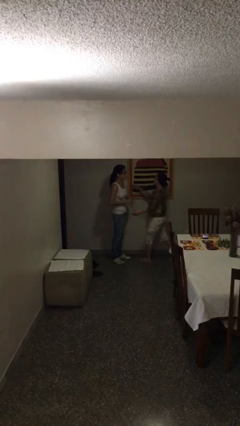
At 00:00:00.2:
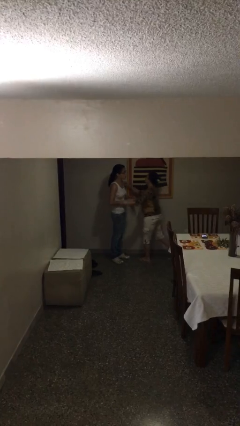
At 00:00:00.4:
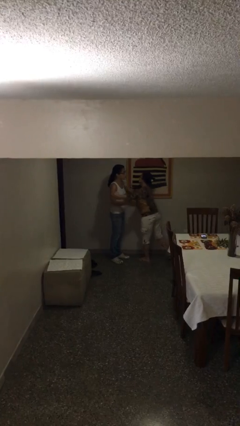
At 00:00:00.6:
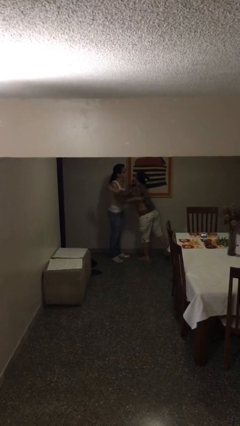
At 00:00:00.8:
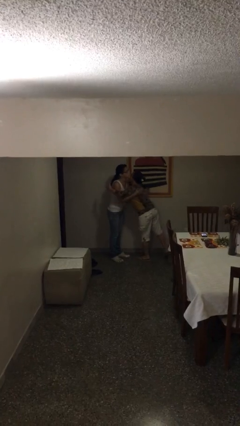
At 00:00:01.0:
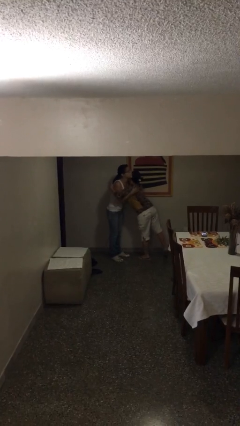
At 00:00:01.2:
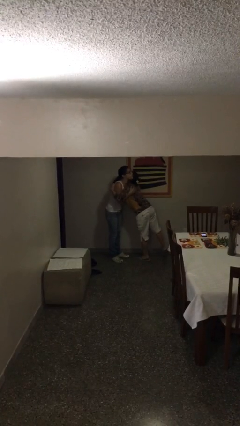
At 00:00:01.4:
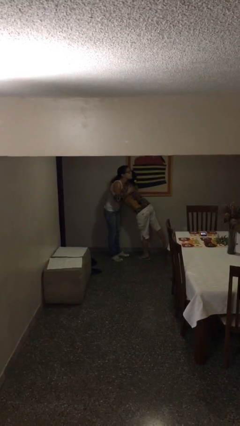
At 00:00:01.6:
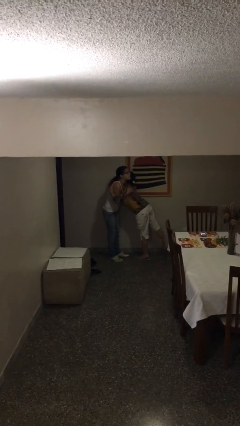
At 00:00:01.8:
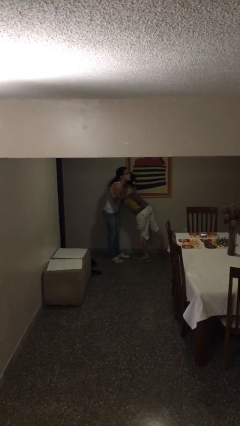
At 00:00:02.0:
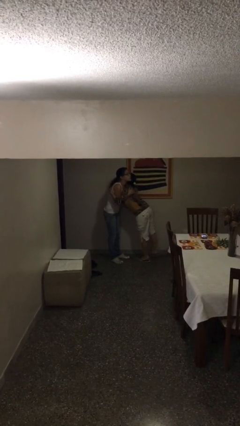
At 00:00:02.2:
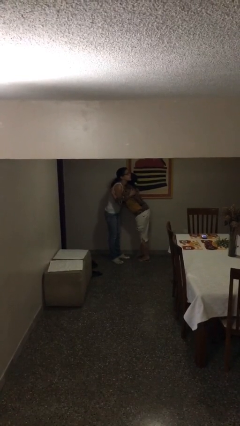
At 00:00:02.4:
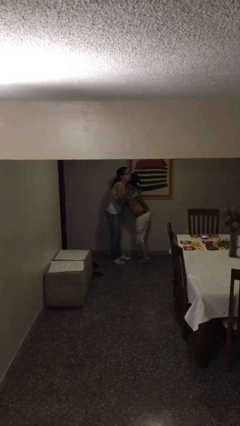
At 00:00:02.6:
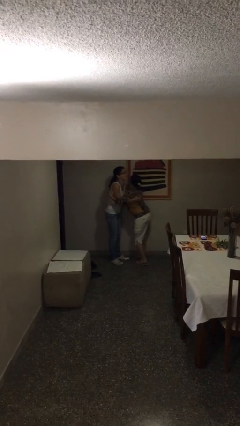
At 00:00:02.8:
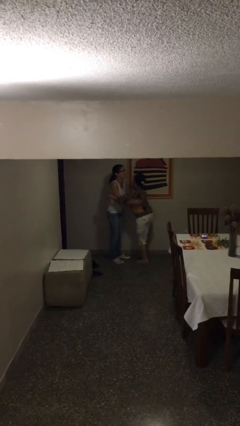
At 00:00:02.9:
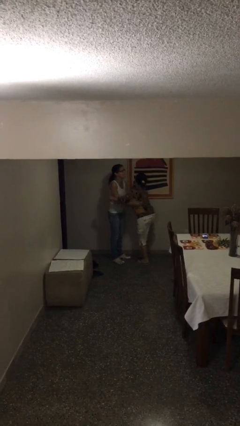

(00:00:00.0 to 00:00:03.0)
person embraces person

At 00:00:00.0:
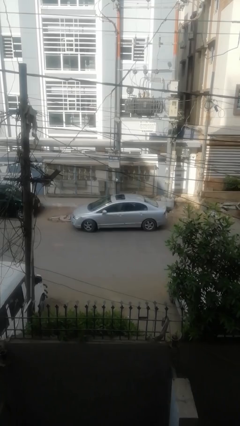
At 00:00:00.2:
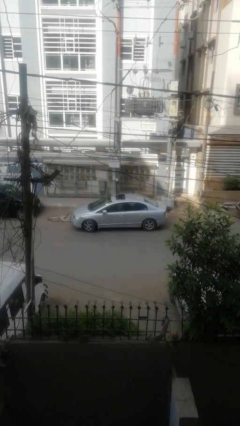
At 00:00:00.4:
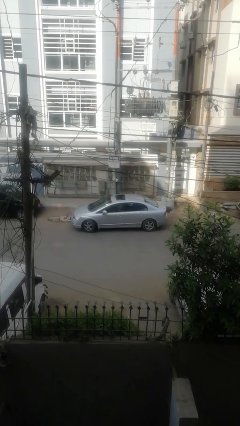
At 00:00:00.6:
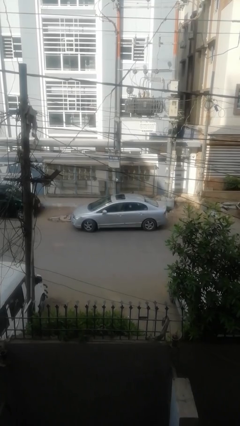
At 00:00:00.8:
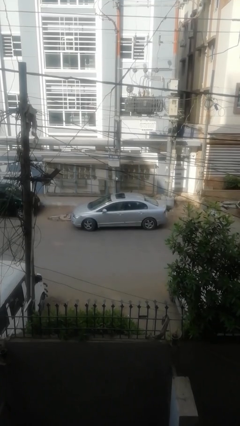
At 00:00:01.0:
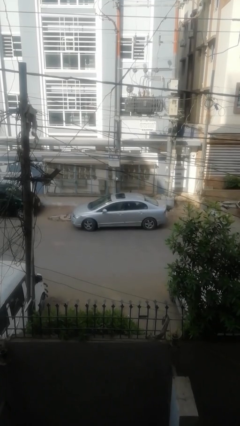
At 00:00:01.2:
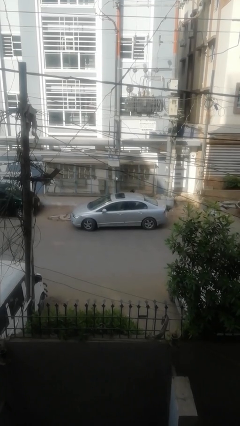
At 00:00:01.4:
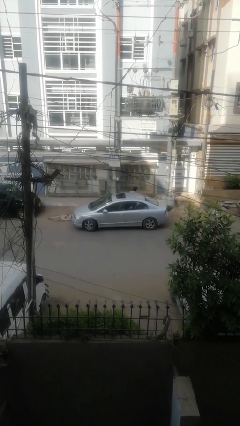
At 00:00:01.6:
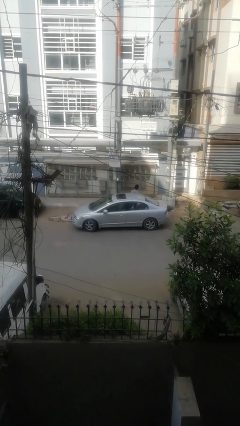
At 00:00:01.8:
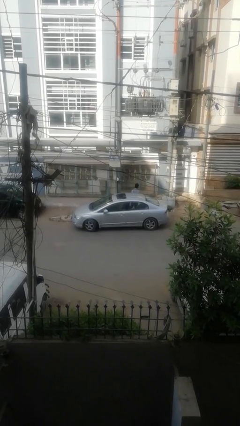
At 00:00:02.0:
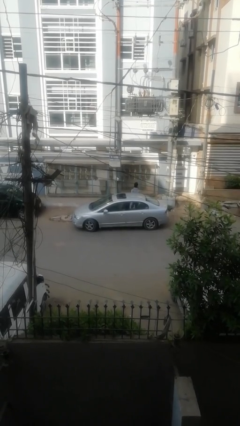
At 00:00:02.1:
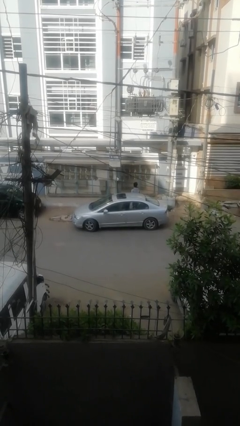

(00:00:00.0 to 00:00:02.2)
car drops off person

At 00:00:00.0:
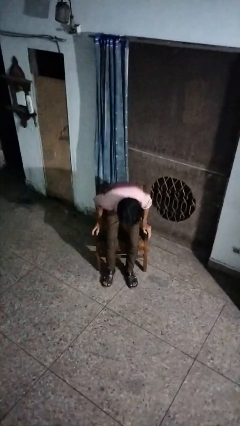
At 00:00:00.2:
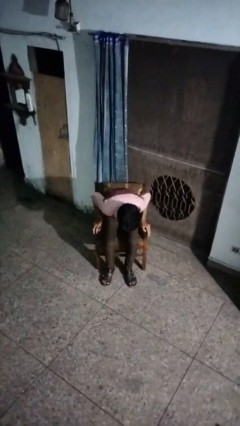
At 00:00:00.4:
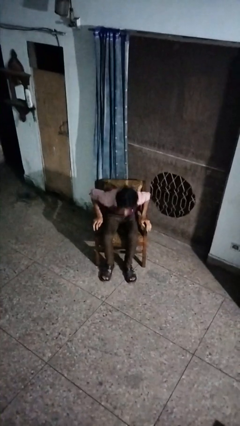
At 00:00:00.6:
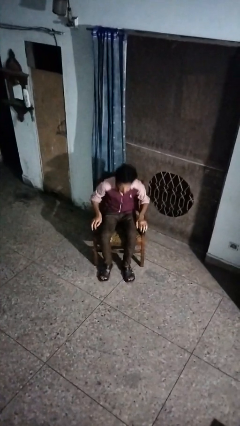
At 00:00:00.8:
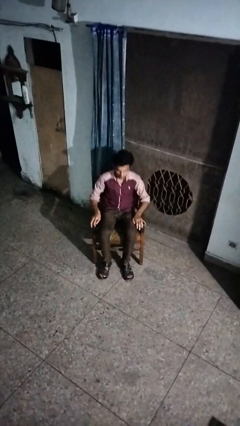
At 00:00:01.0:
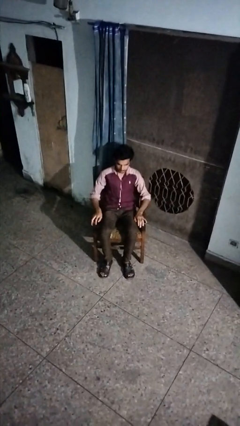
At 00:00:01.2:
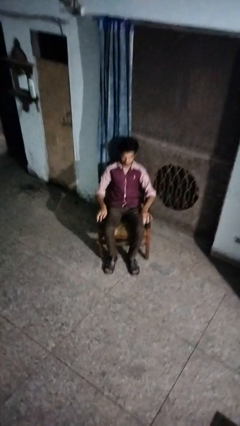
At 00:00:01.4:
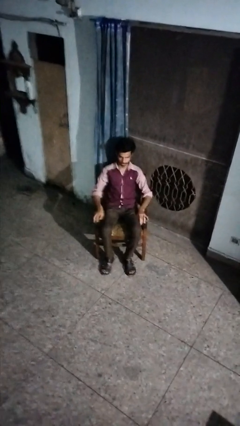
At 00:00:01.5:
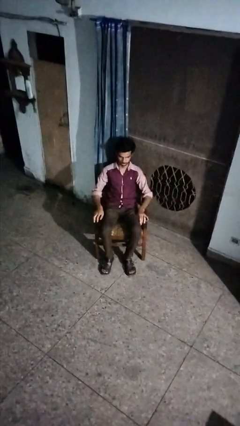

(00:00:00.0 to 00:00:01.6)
person sits down

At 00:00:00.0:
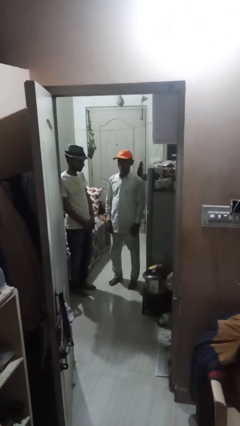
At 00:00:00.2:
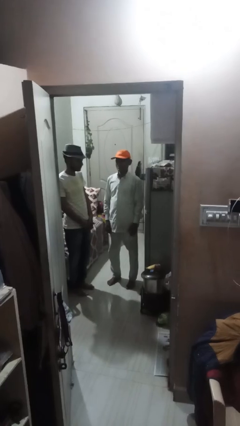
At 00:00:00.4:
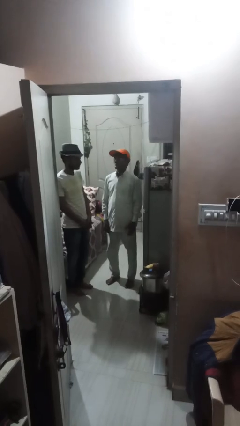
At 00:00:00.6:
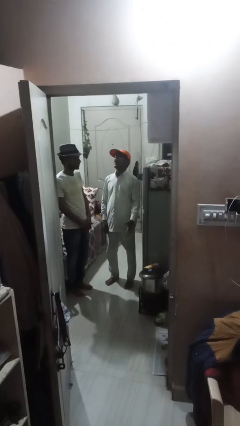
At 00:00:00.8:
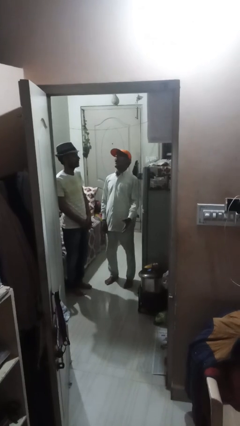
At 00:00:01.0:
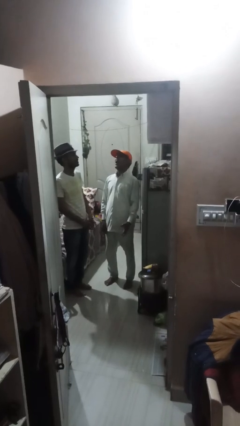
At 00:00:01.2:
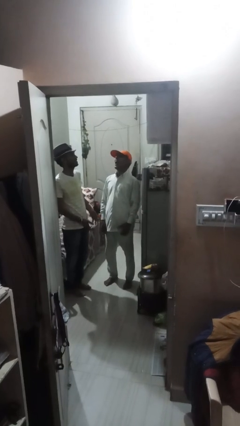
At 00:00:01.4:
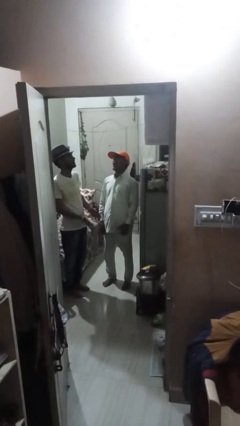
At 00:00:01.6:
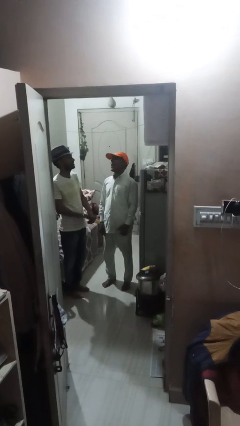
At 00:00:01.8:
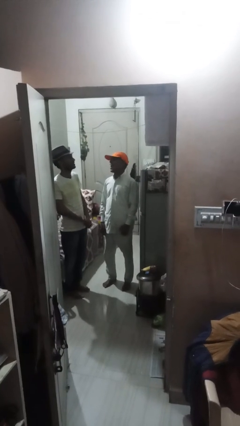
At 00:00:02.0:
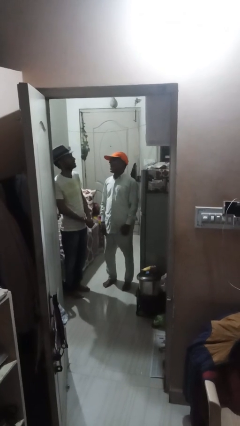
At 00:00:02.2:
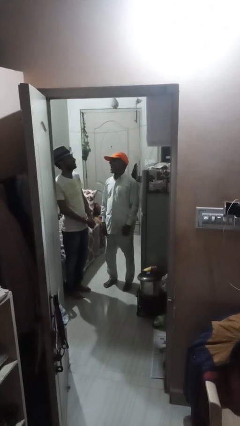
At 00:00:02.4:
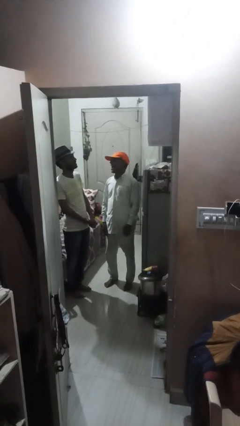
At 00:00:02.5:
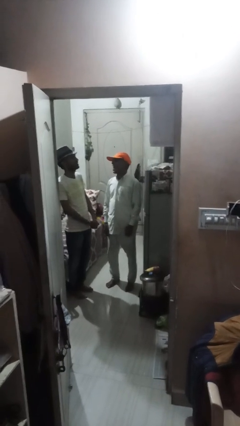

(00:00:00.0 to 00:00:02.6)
person laughs with person

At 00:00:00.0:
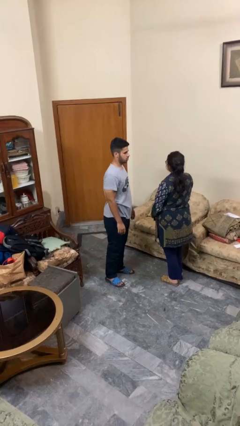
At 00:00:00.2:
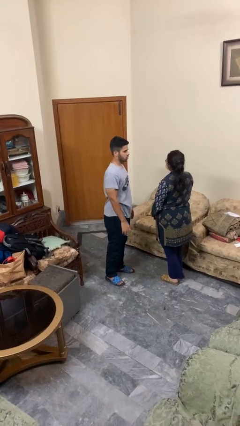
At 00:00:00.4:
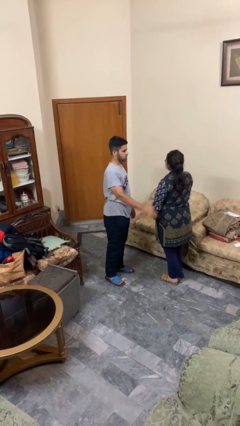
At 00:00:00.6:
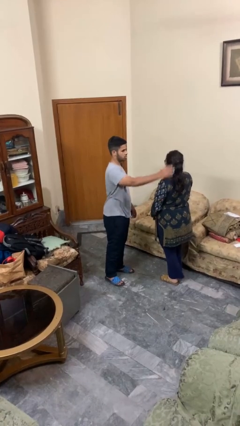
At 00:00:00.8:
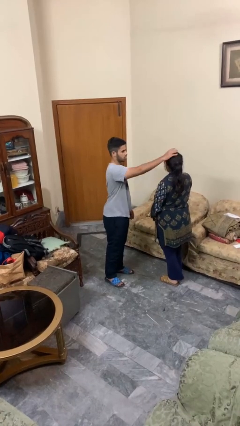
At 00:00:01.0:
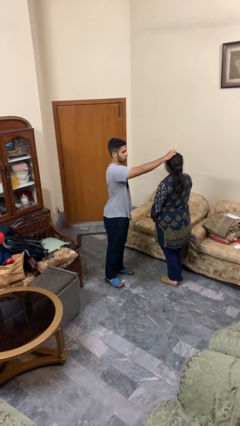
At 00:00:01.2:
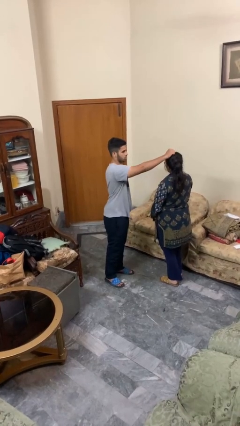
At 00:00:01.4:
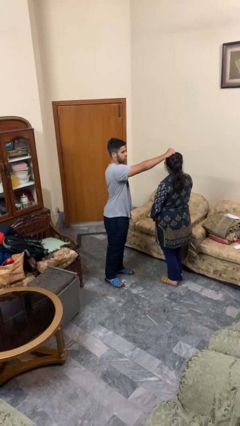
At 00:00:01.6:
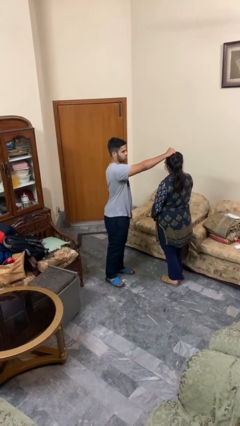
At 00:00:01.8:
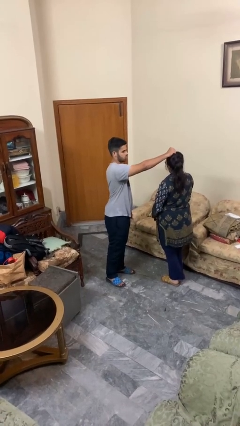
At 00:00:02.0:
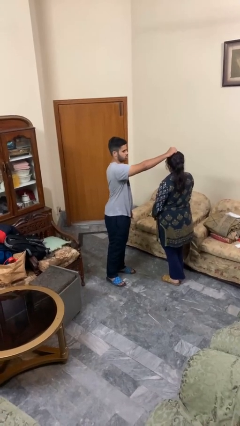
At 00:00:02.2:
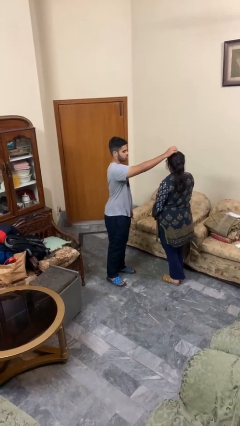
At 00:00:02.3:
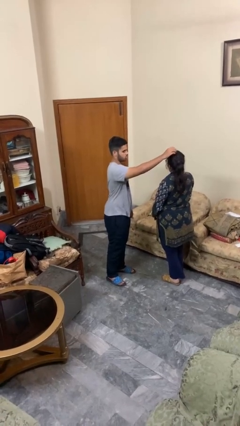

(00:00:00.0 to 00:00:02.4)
person grabs person by hair

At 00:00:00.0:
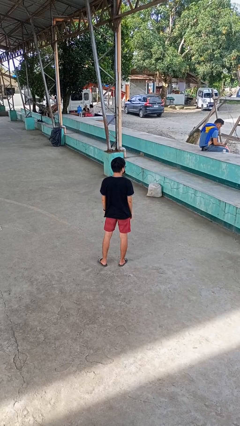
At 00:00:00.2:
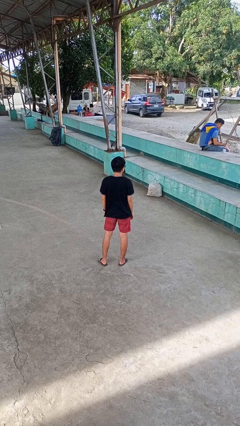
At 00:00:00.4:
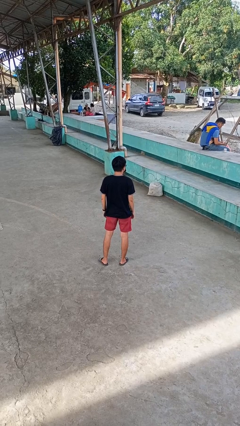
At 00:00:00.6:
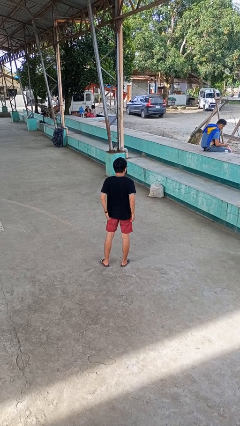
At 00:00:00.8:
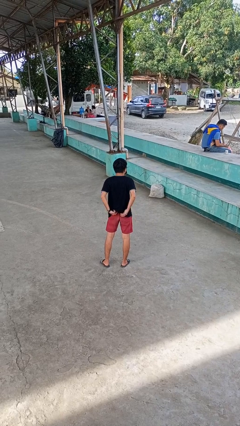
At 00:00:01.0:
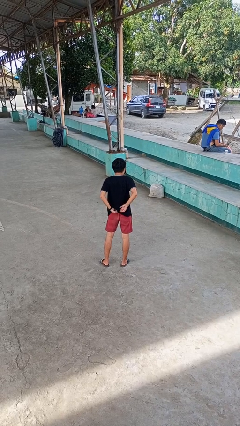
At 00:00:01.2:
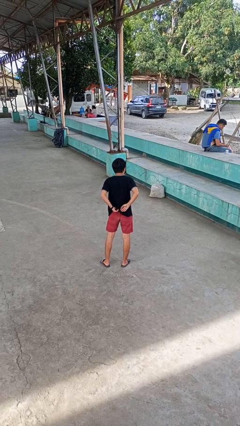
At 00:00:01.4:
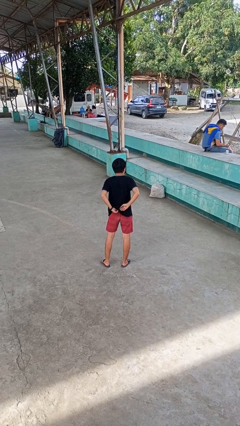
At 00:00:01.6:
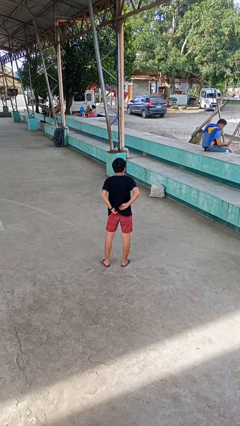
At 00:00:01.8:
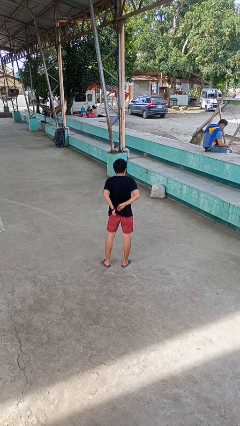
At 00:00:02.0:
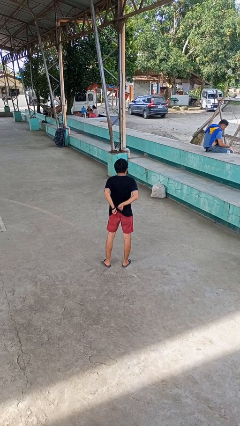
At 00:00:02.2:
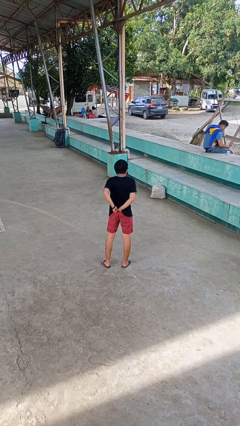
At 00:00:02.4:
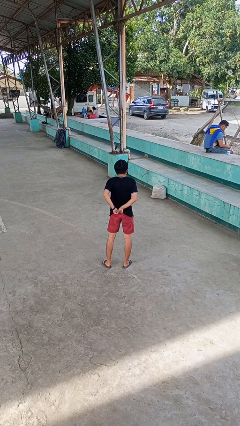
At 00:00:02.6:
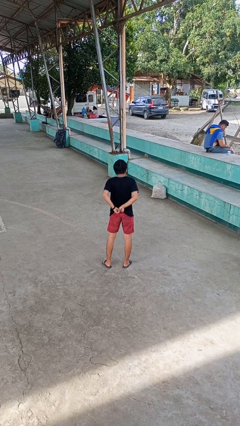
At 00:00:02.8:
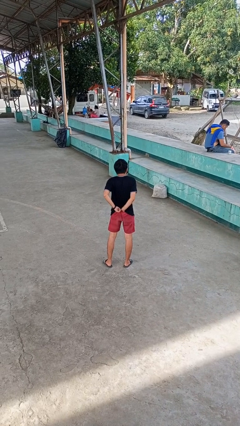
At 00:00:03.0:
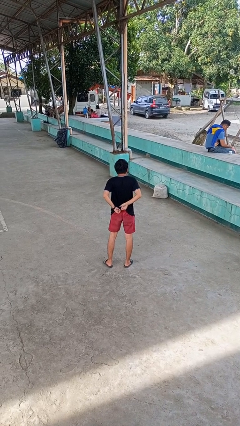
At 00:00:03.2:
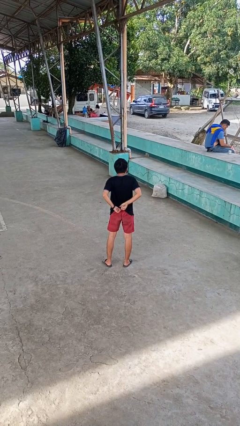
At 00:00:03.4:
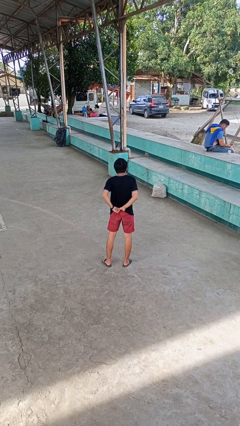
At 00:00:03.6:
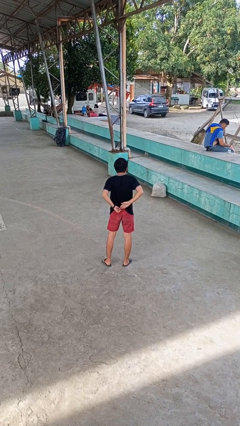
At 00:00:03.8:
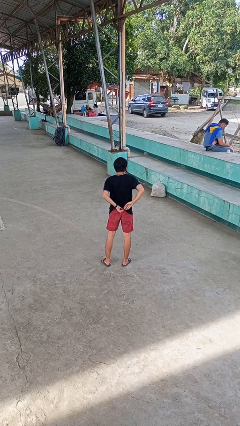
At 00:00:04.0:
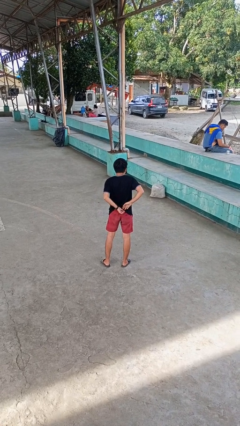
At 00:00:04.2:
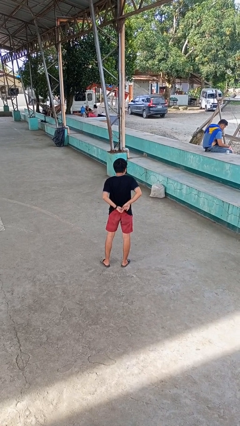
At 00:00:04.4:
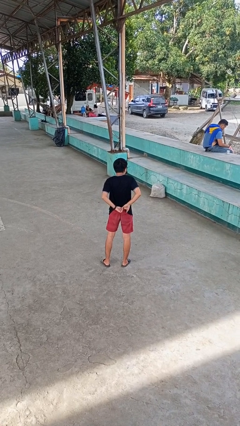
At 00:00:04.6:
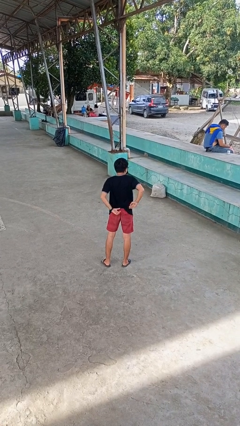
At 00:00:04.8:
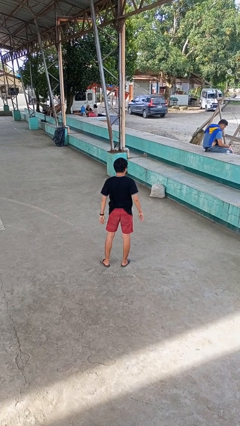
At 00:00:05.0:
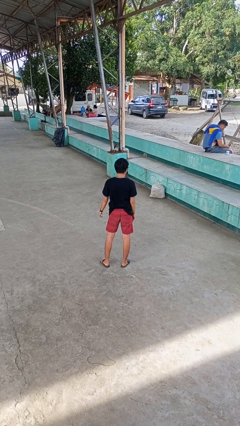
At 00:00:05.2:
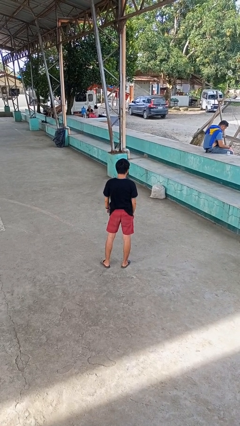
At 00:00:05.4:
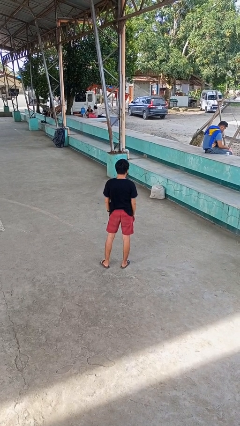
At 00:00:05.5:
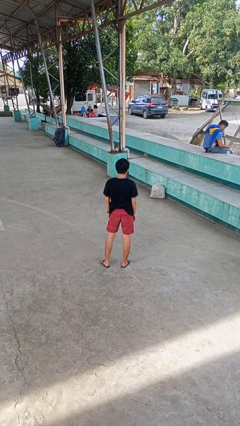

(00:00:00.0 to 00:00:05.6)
person tucks in shirt
